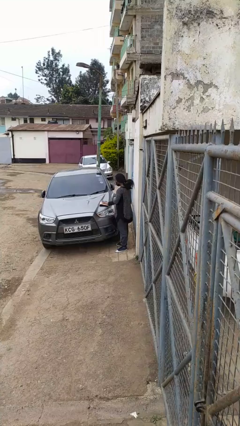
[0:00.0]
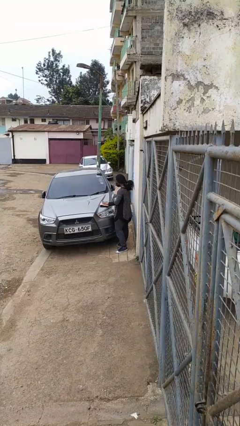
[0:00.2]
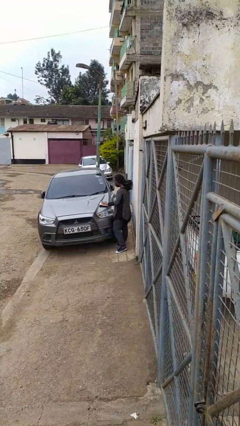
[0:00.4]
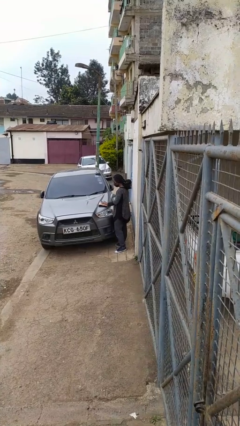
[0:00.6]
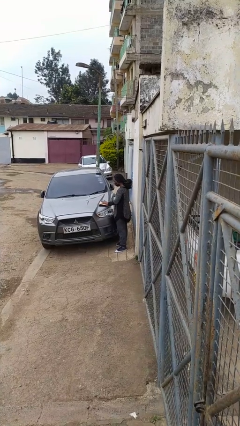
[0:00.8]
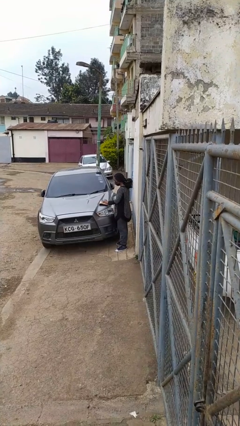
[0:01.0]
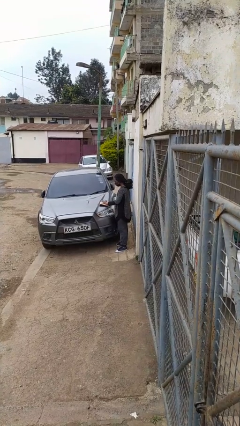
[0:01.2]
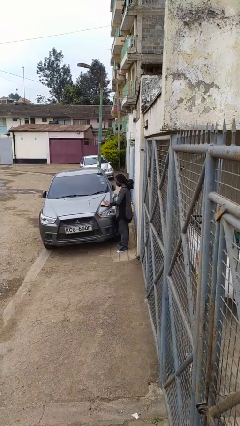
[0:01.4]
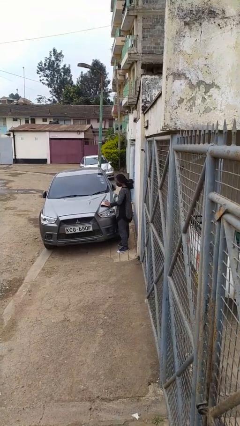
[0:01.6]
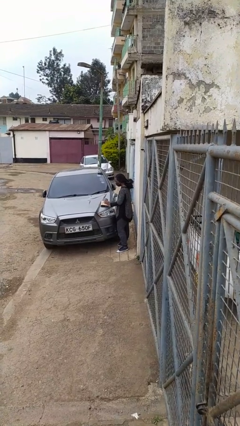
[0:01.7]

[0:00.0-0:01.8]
person polishes car with rag

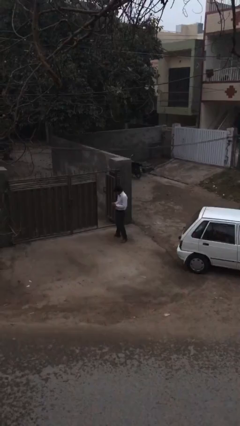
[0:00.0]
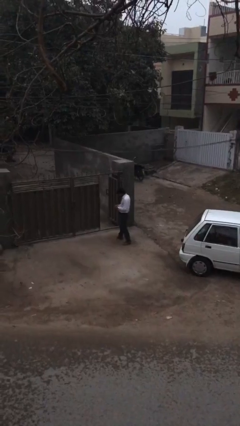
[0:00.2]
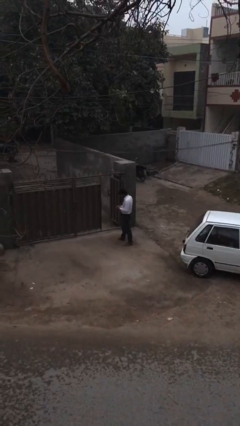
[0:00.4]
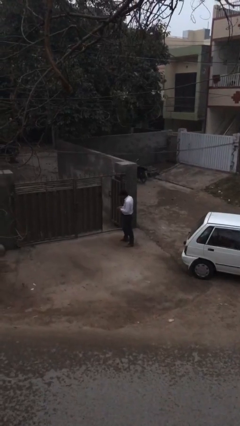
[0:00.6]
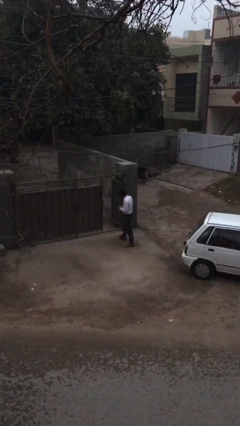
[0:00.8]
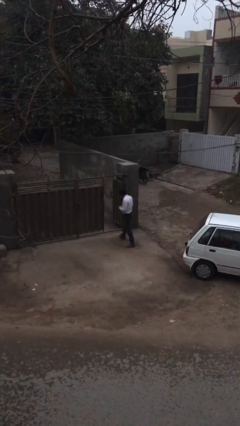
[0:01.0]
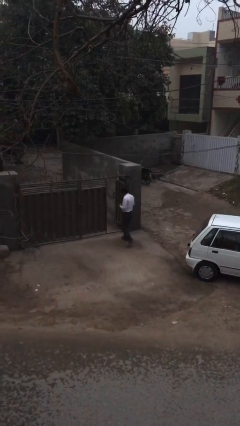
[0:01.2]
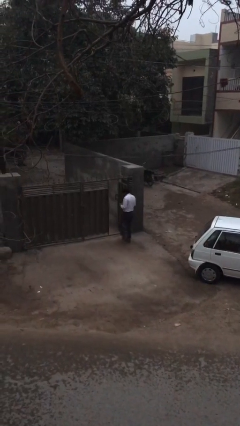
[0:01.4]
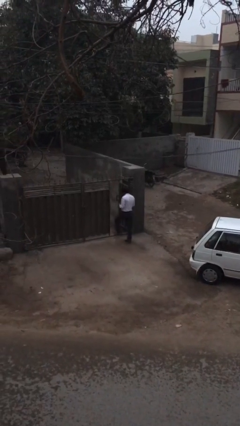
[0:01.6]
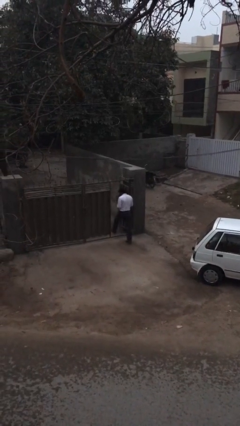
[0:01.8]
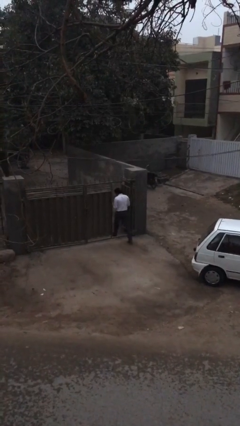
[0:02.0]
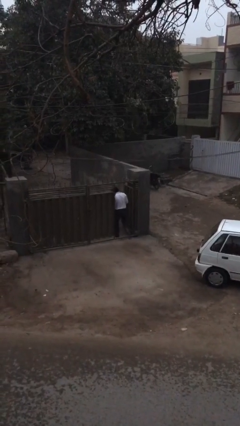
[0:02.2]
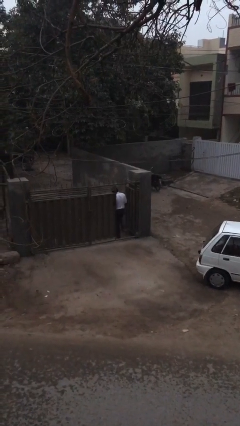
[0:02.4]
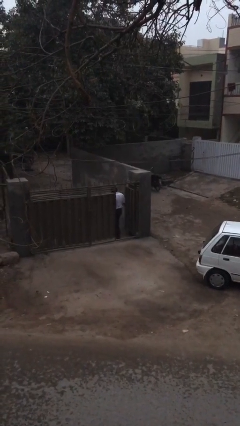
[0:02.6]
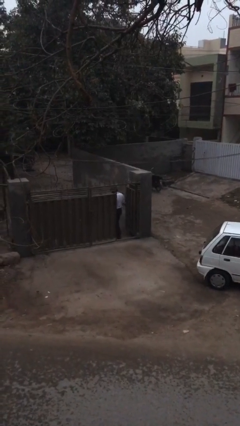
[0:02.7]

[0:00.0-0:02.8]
person exits scene through structure

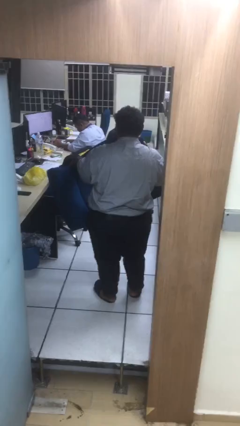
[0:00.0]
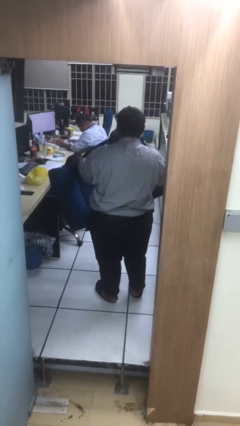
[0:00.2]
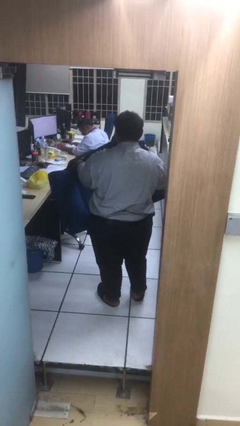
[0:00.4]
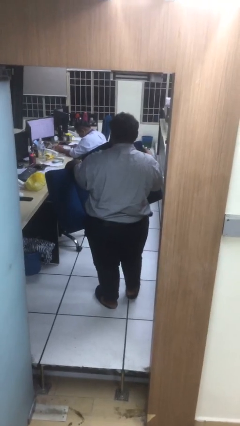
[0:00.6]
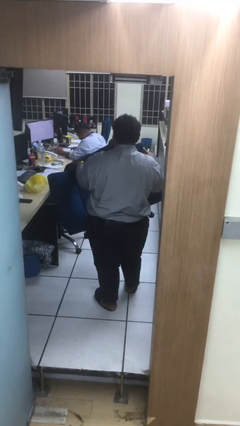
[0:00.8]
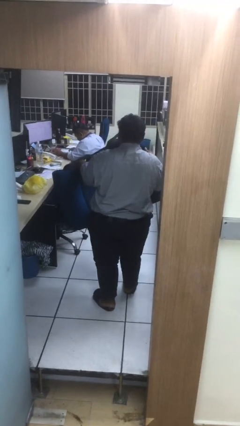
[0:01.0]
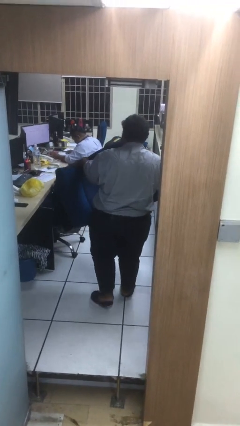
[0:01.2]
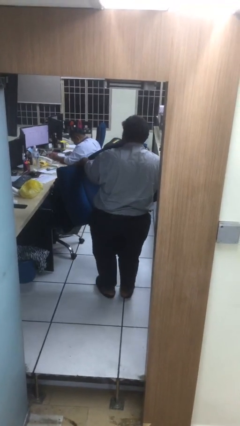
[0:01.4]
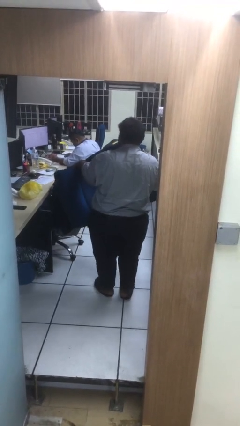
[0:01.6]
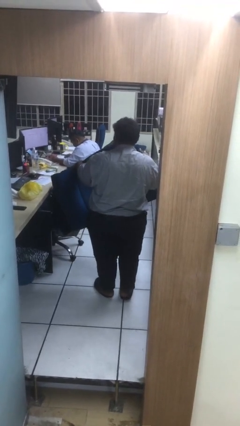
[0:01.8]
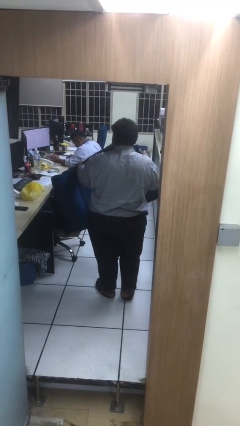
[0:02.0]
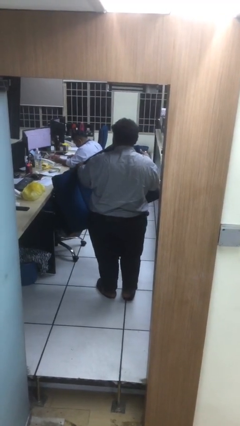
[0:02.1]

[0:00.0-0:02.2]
person carries furniture

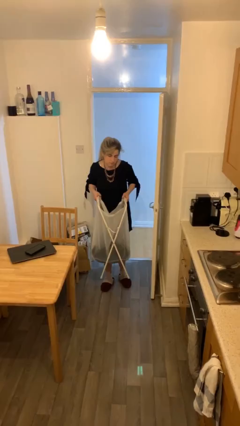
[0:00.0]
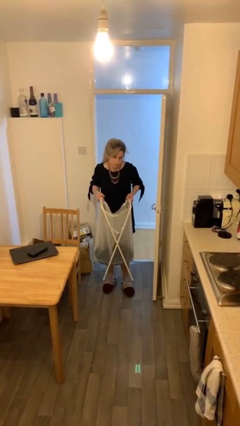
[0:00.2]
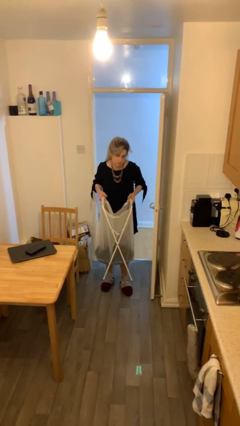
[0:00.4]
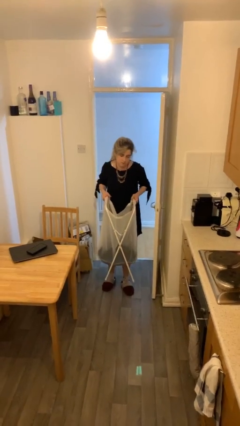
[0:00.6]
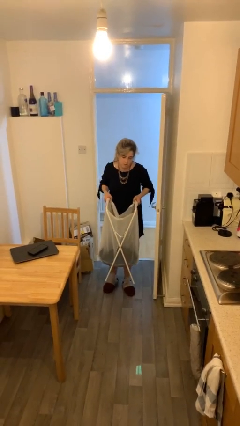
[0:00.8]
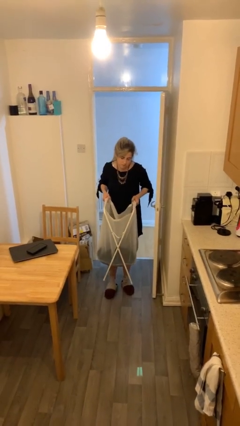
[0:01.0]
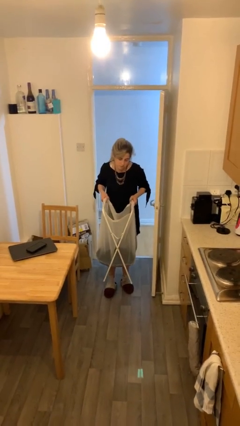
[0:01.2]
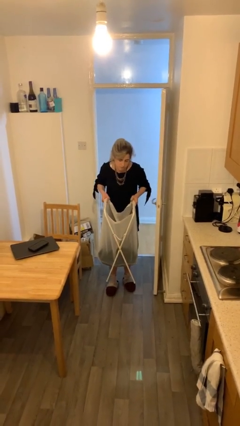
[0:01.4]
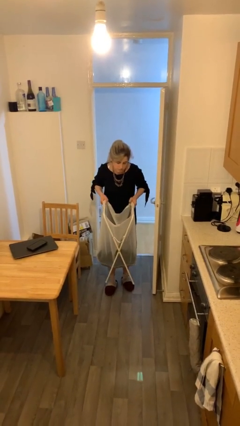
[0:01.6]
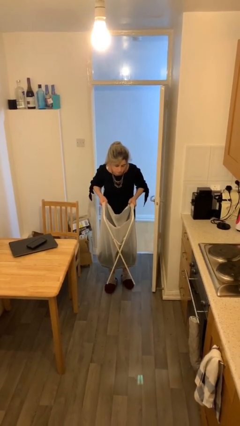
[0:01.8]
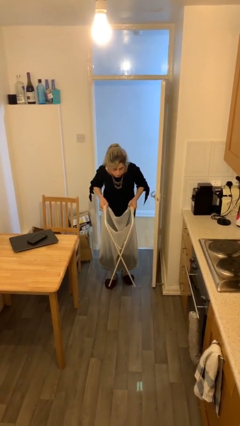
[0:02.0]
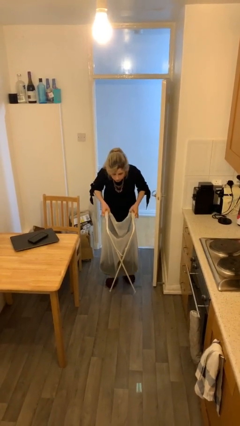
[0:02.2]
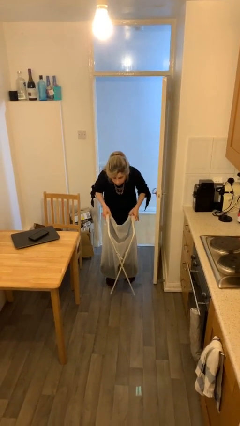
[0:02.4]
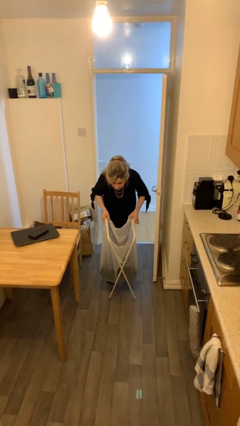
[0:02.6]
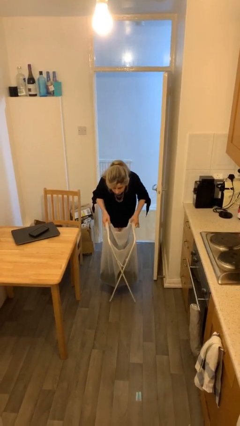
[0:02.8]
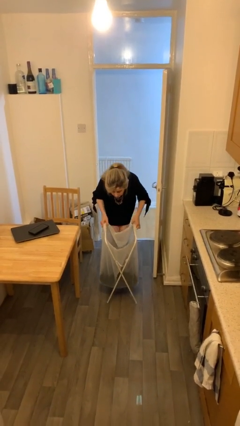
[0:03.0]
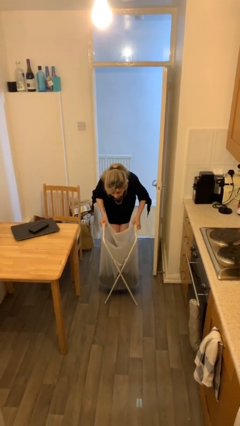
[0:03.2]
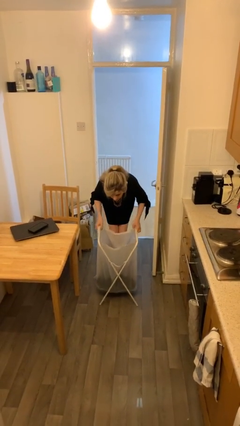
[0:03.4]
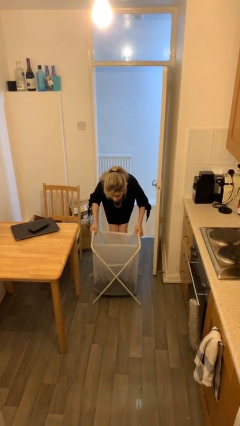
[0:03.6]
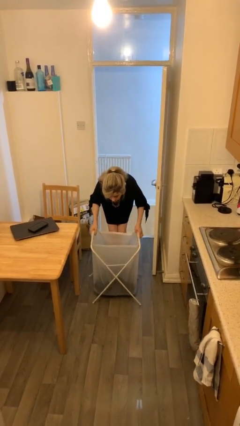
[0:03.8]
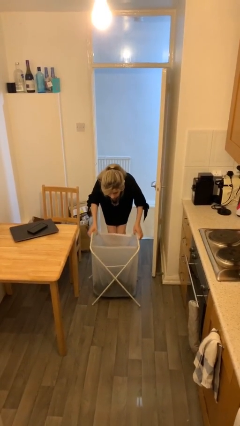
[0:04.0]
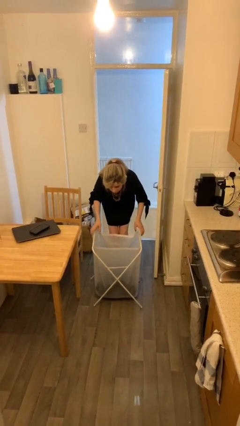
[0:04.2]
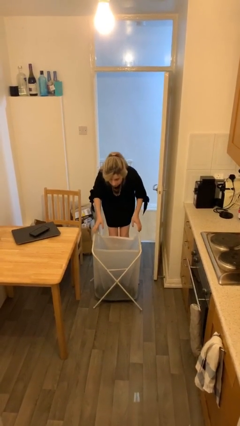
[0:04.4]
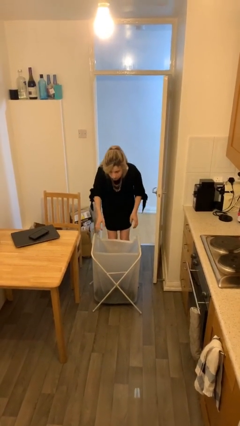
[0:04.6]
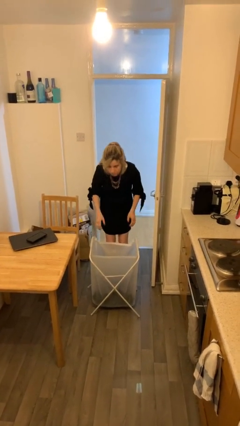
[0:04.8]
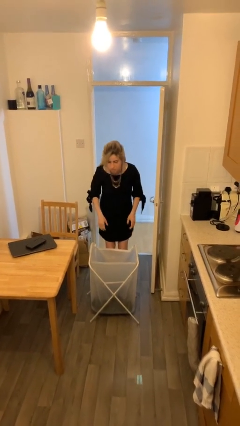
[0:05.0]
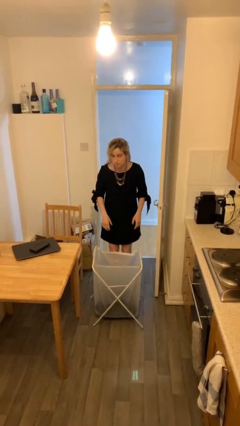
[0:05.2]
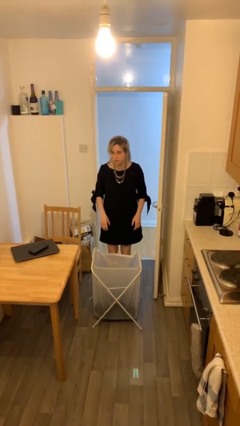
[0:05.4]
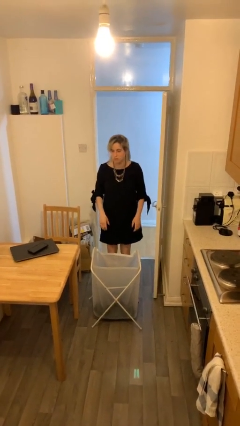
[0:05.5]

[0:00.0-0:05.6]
person puts down object on floor

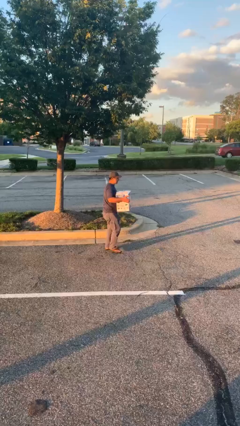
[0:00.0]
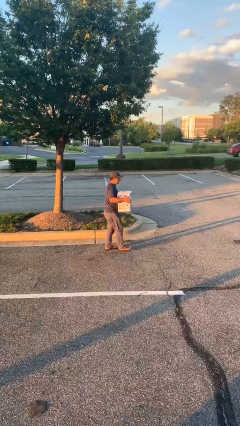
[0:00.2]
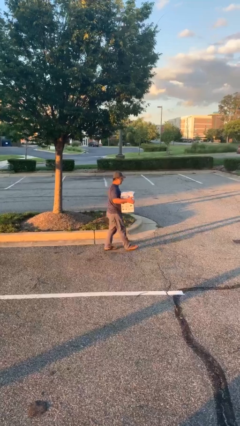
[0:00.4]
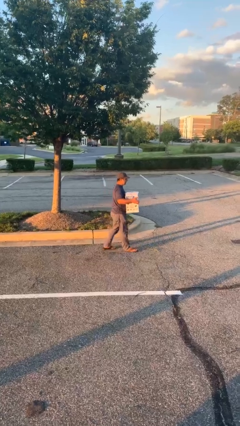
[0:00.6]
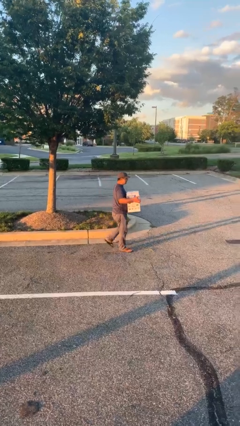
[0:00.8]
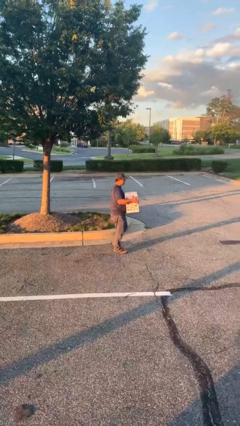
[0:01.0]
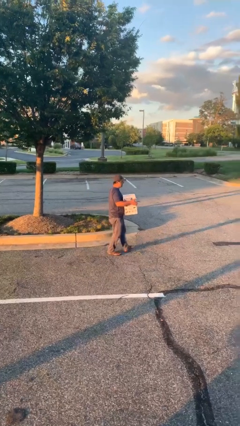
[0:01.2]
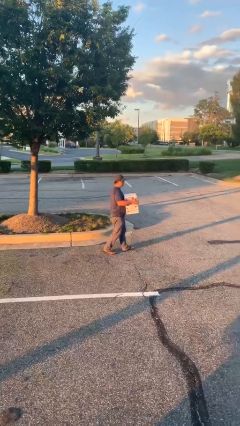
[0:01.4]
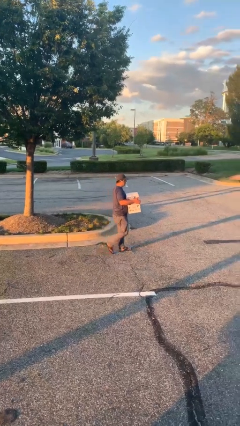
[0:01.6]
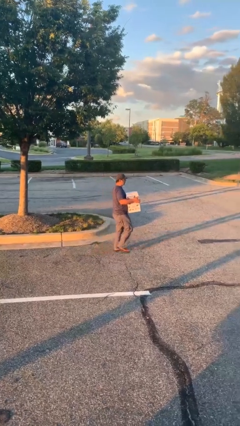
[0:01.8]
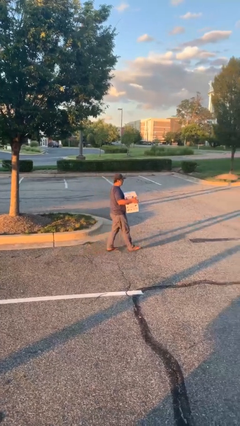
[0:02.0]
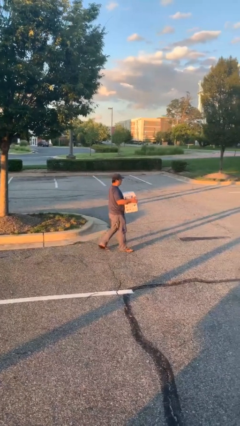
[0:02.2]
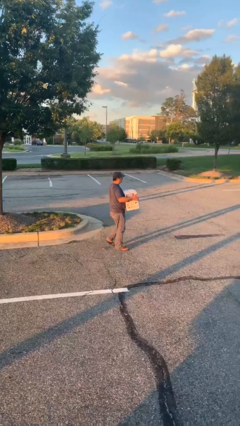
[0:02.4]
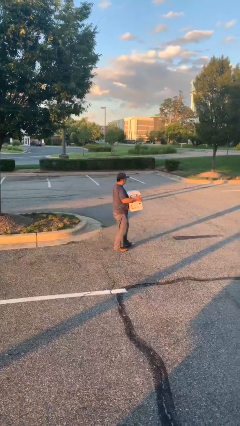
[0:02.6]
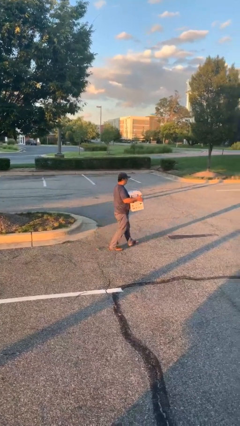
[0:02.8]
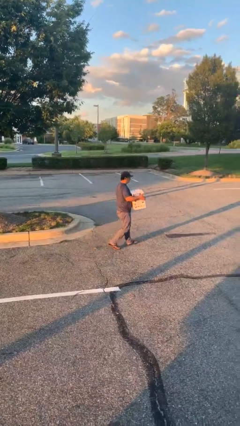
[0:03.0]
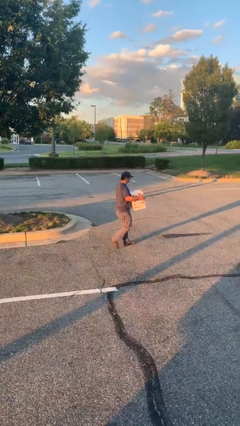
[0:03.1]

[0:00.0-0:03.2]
person carries heavy object

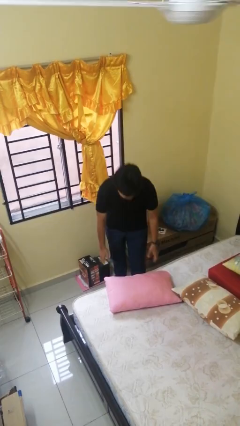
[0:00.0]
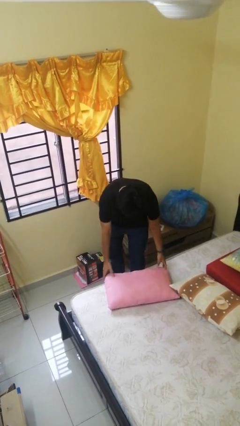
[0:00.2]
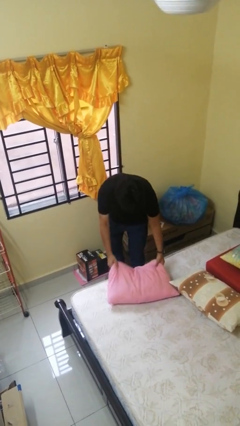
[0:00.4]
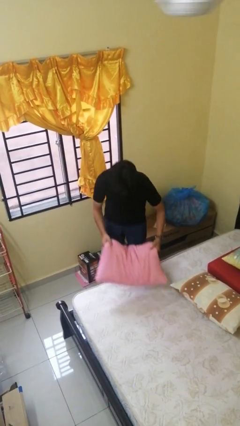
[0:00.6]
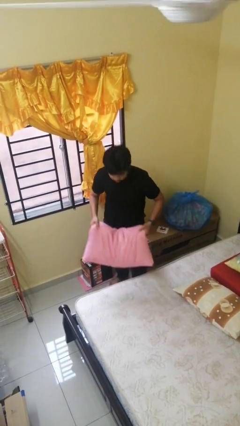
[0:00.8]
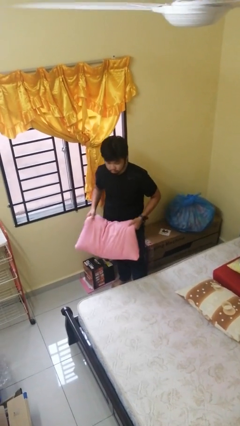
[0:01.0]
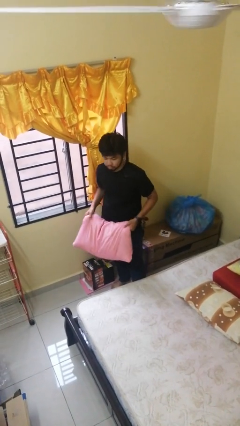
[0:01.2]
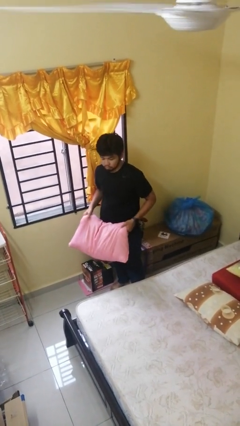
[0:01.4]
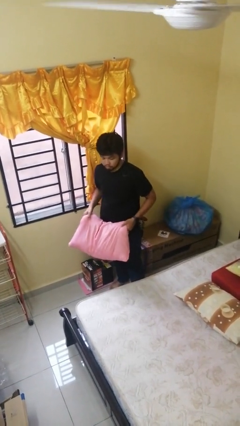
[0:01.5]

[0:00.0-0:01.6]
person picks up object from bed
